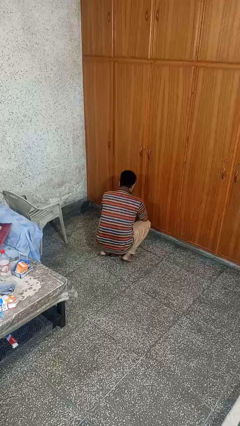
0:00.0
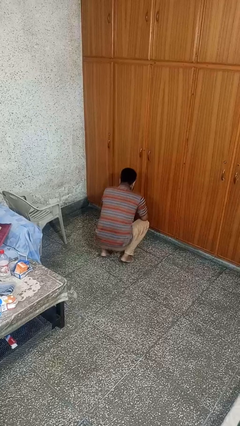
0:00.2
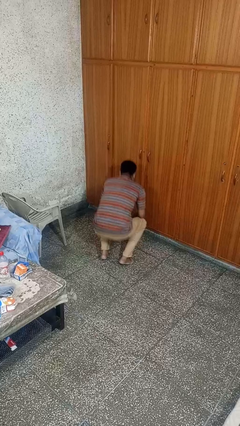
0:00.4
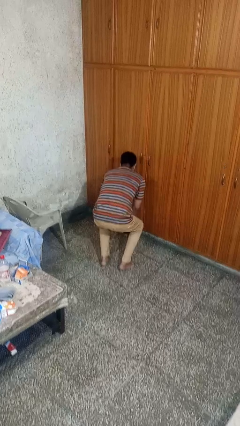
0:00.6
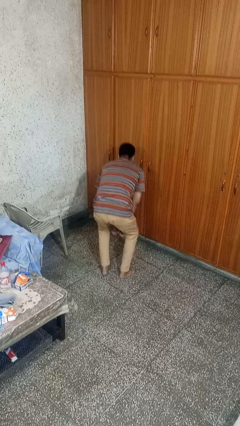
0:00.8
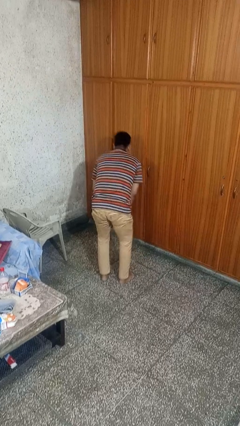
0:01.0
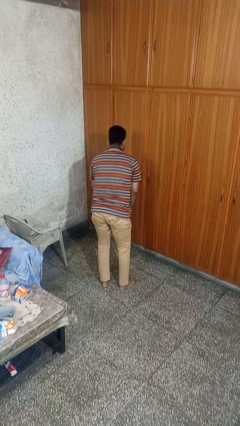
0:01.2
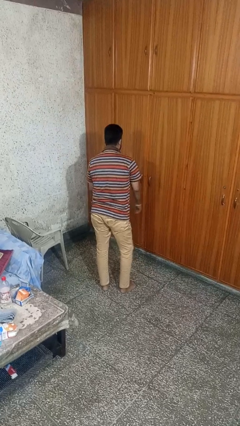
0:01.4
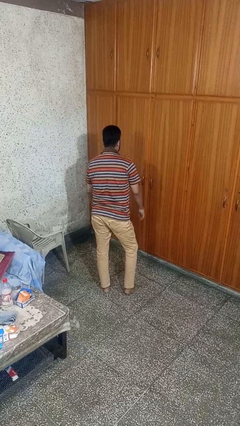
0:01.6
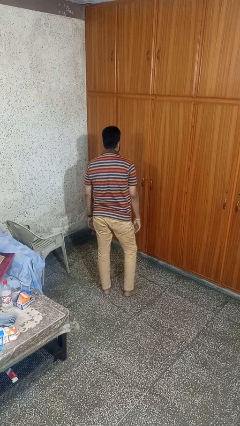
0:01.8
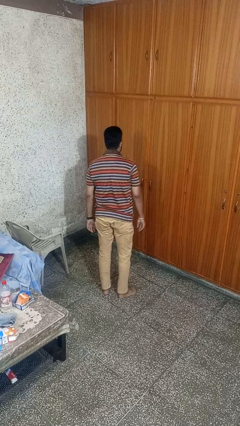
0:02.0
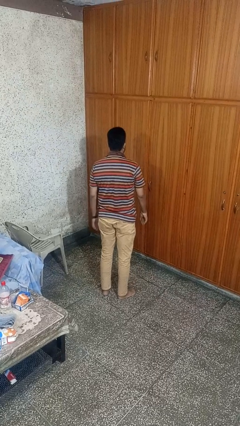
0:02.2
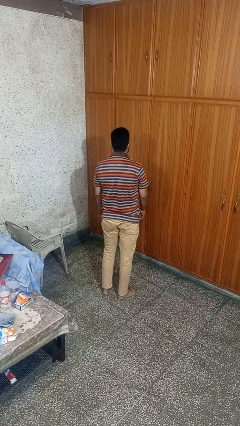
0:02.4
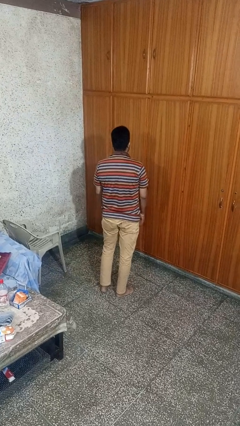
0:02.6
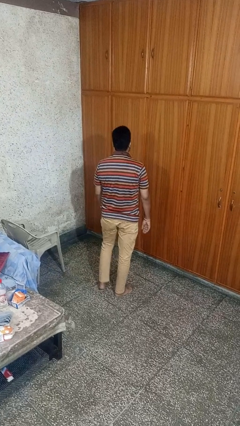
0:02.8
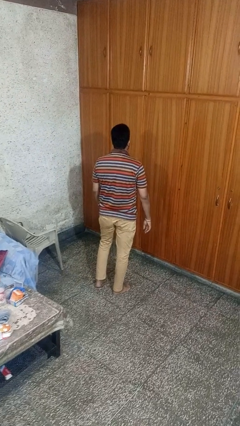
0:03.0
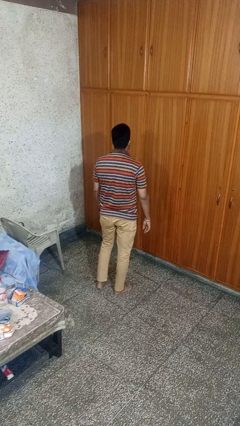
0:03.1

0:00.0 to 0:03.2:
person stands up

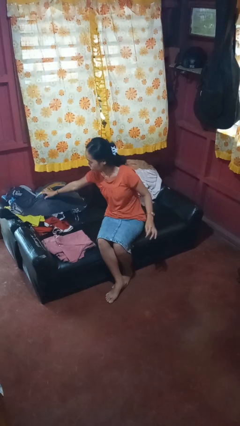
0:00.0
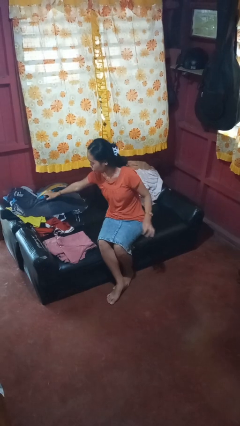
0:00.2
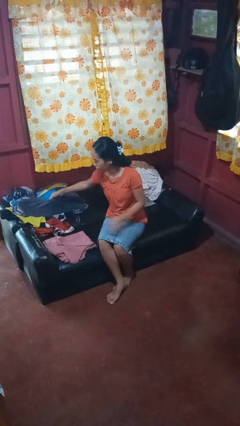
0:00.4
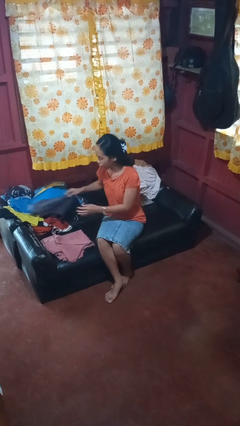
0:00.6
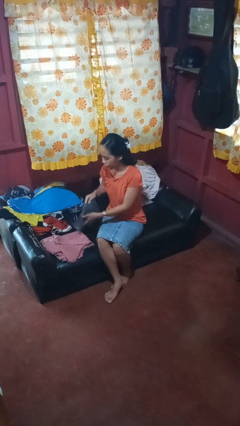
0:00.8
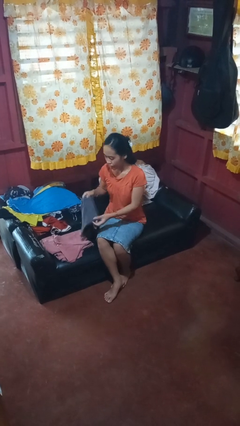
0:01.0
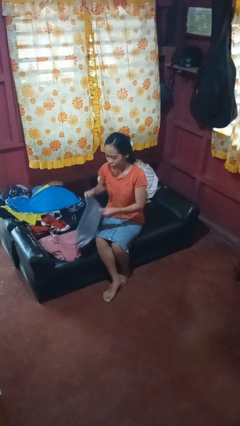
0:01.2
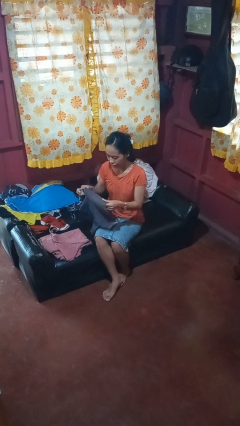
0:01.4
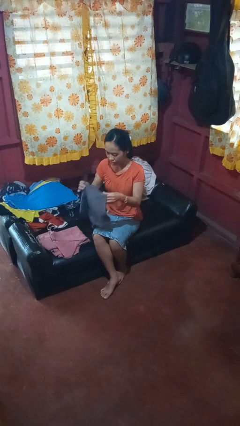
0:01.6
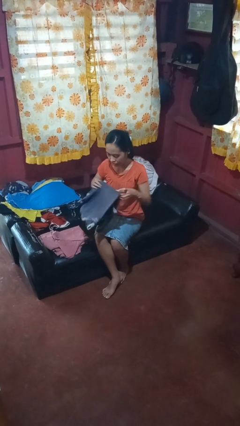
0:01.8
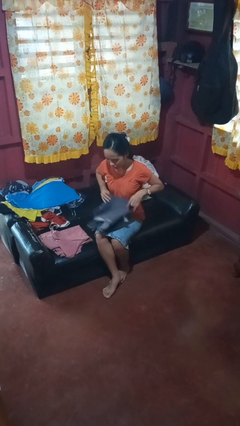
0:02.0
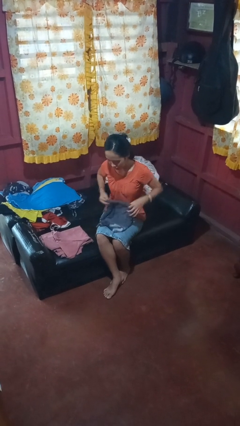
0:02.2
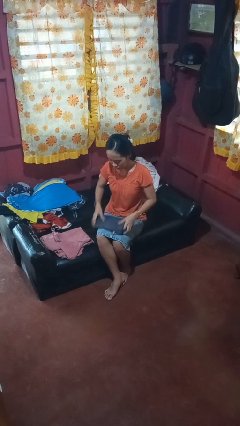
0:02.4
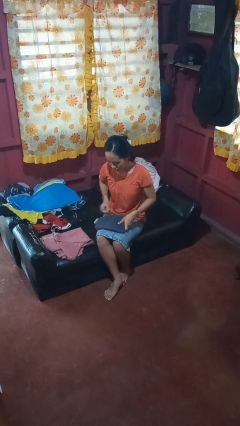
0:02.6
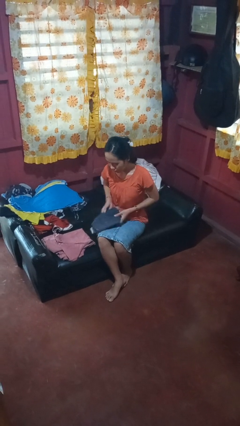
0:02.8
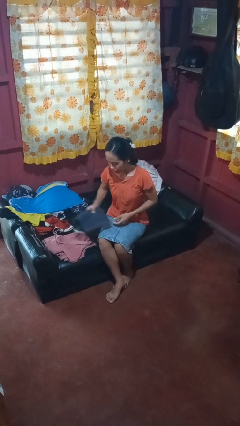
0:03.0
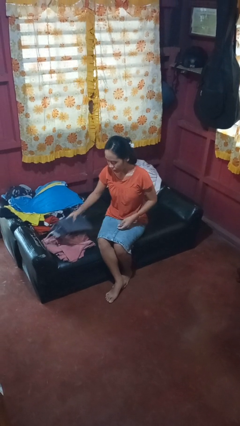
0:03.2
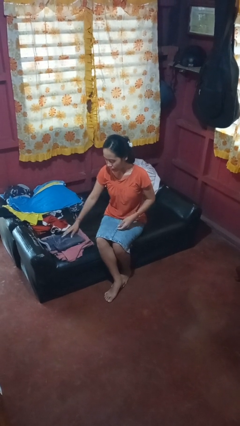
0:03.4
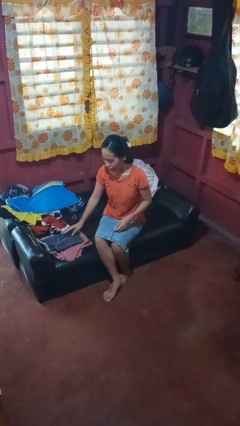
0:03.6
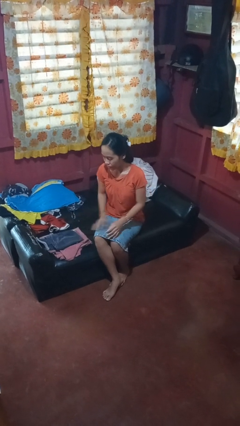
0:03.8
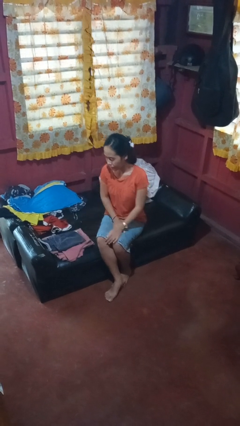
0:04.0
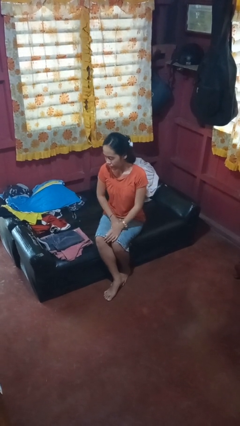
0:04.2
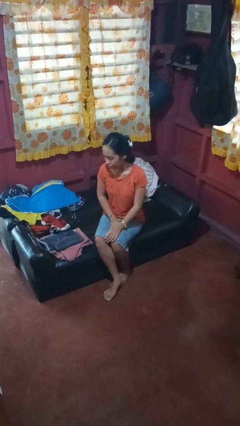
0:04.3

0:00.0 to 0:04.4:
person folds shirt

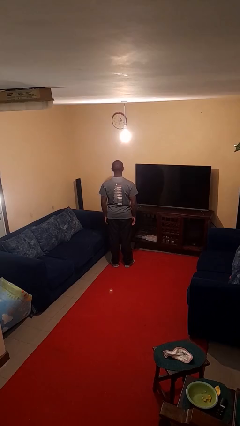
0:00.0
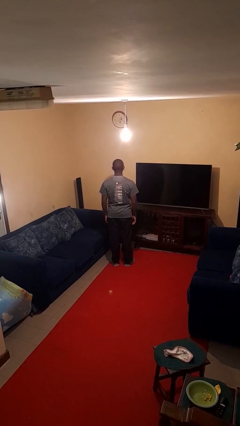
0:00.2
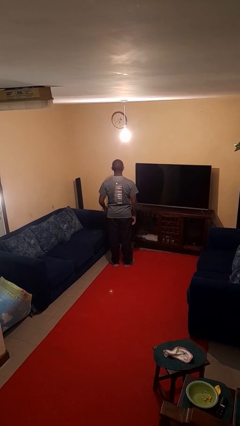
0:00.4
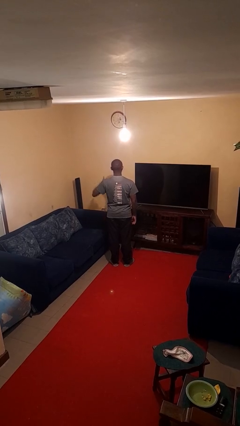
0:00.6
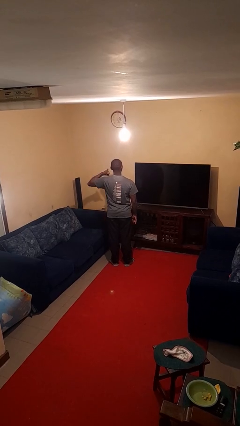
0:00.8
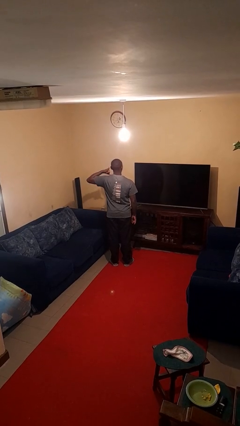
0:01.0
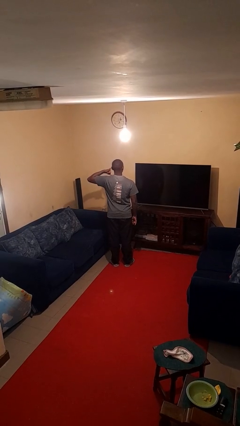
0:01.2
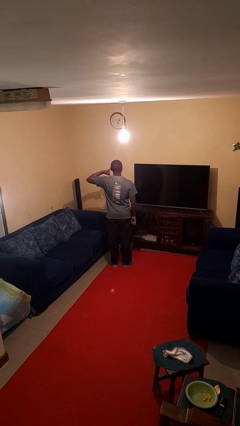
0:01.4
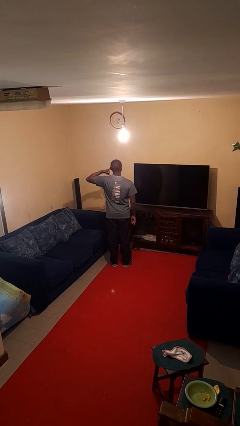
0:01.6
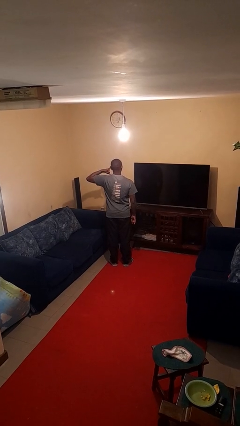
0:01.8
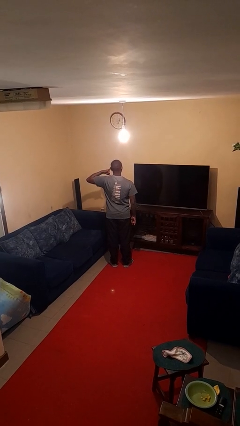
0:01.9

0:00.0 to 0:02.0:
person gestures call me

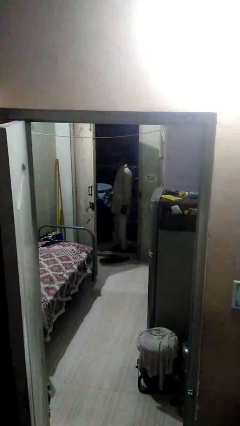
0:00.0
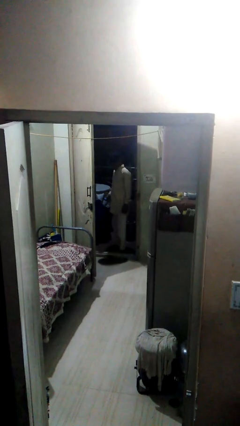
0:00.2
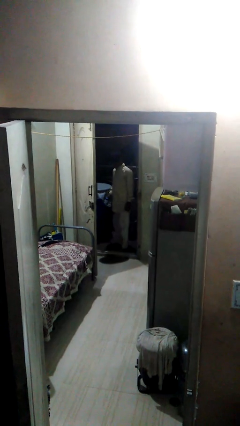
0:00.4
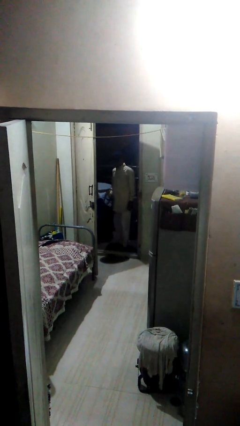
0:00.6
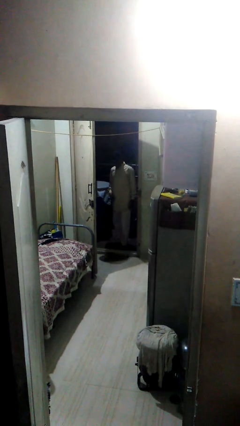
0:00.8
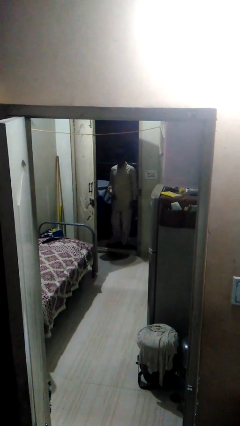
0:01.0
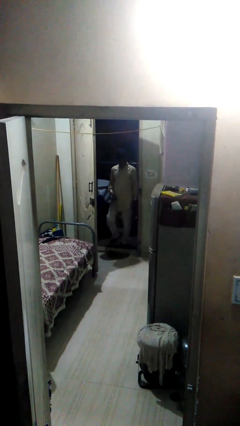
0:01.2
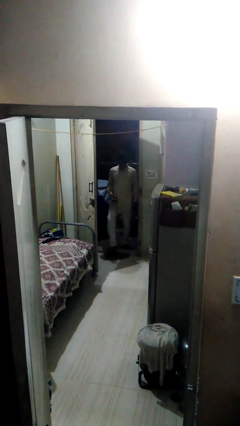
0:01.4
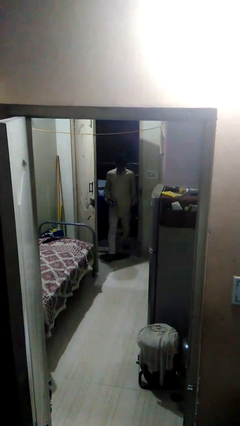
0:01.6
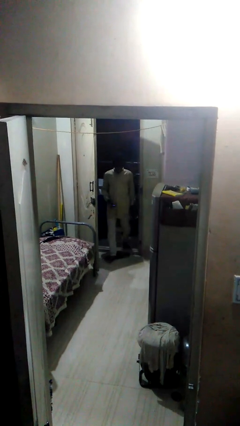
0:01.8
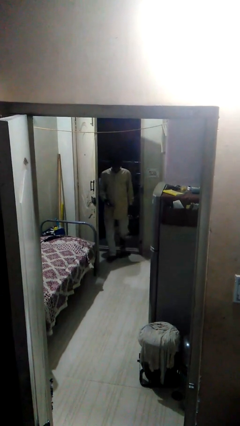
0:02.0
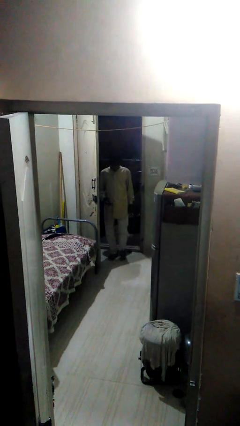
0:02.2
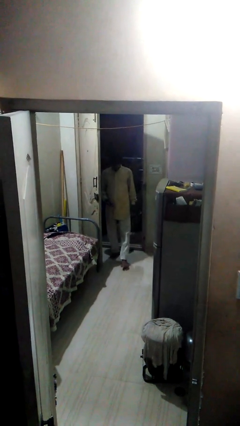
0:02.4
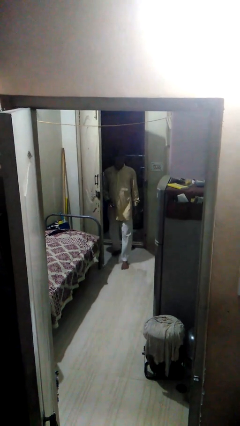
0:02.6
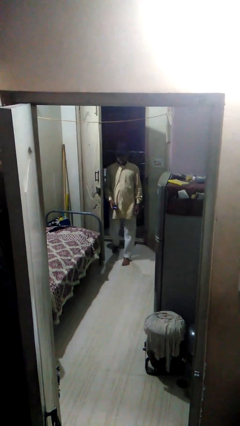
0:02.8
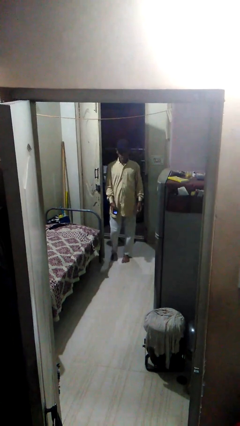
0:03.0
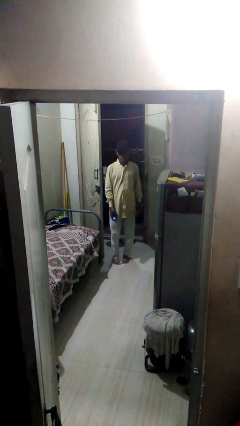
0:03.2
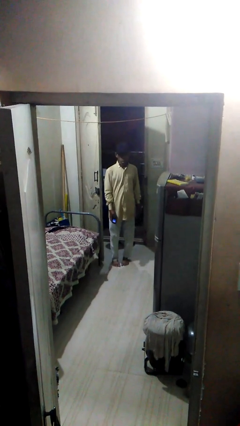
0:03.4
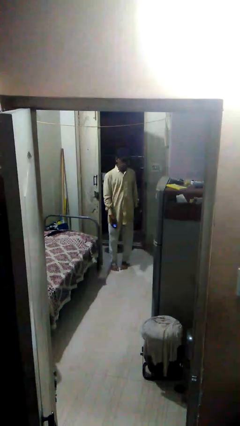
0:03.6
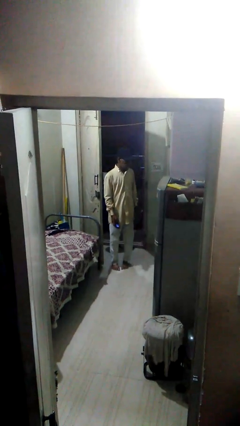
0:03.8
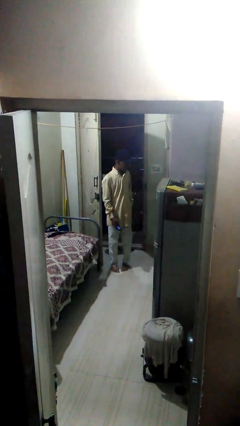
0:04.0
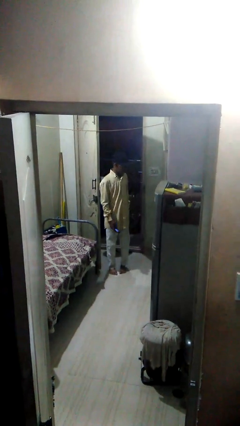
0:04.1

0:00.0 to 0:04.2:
person enters scene through structure

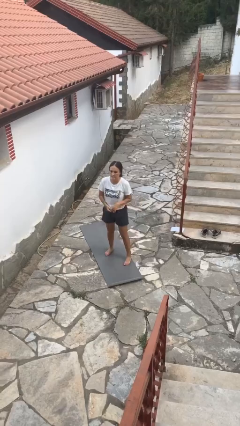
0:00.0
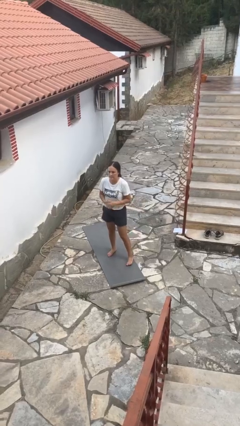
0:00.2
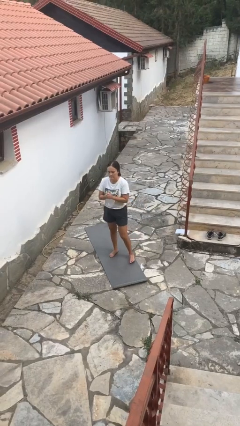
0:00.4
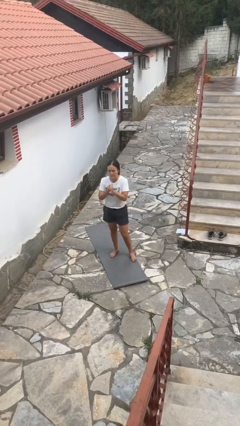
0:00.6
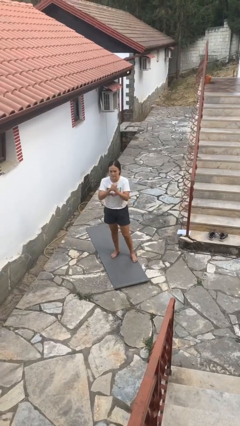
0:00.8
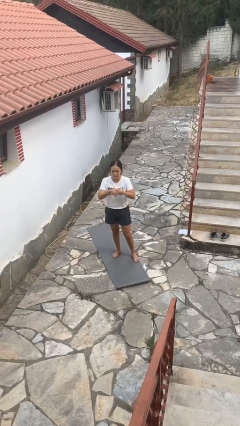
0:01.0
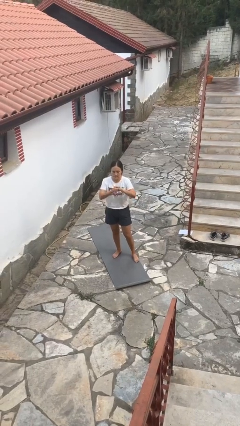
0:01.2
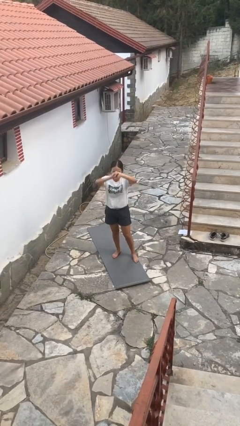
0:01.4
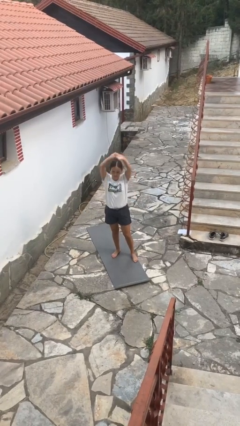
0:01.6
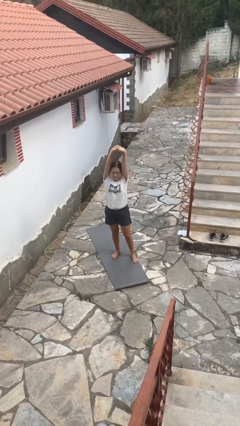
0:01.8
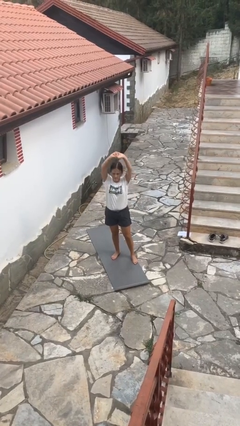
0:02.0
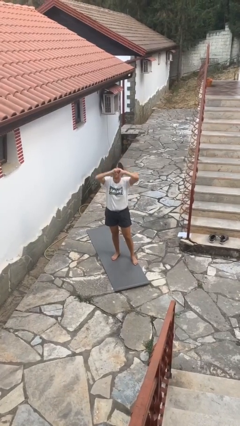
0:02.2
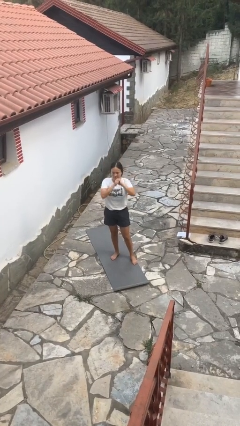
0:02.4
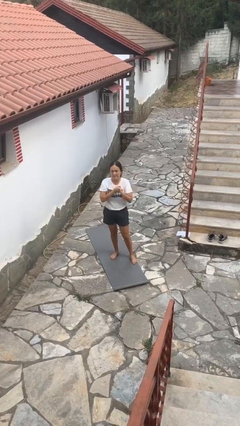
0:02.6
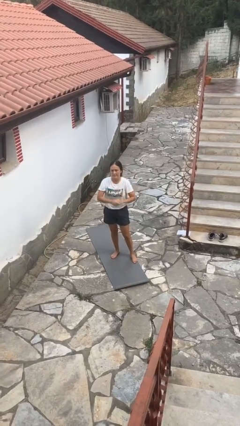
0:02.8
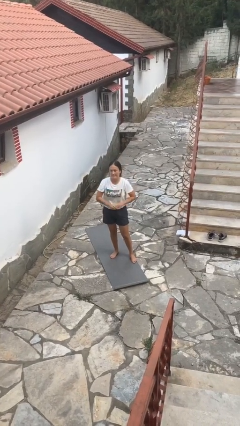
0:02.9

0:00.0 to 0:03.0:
person cracks knuckles

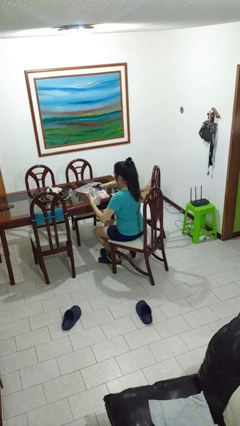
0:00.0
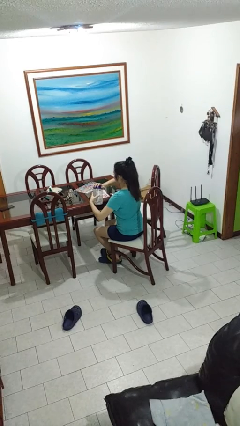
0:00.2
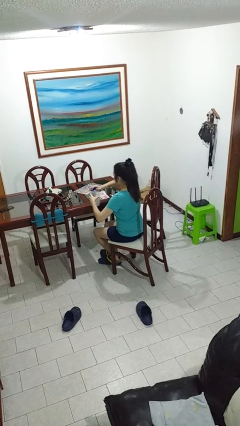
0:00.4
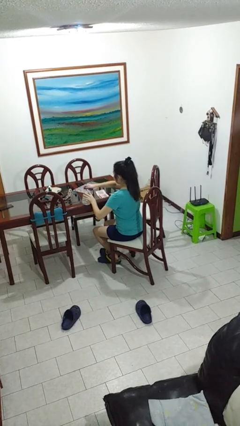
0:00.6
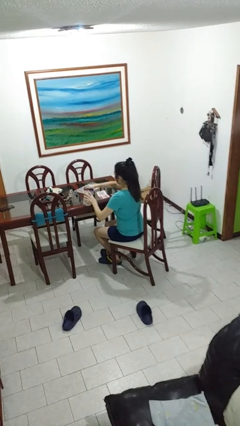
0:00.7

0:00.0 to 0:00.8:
person closes jar
